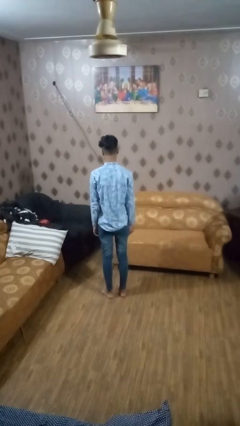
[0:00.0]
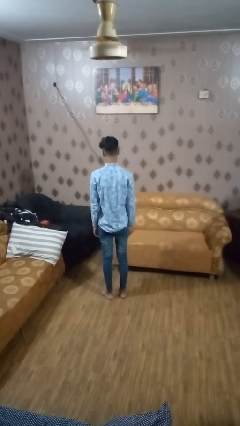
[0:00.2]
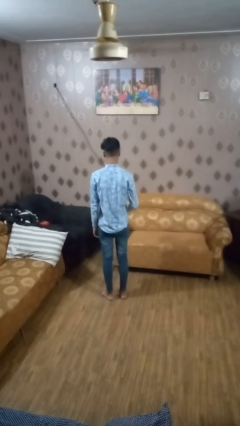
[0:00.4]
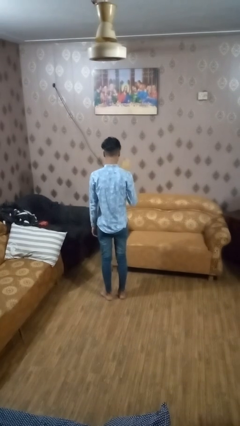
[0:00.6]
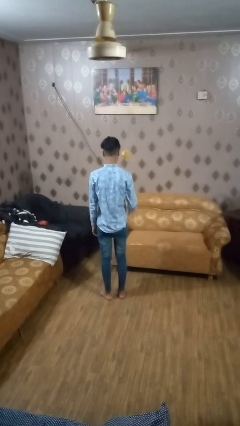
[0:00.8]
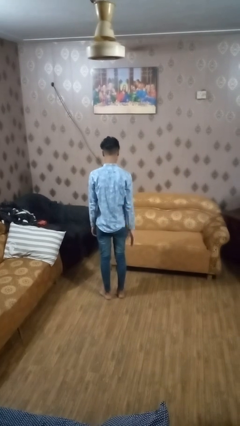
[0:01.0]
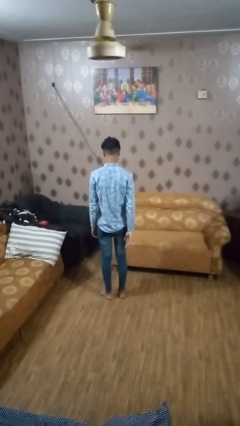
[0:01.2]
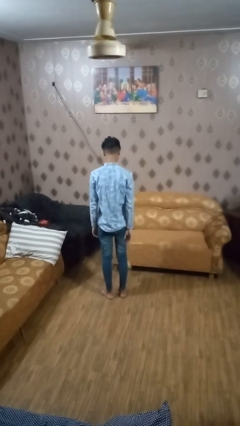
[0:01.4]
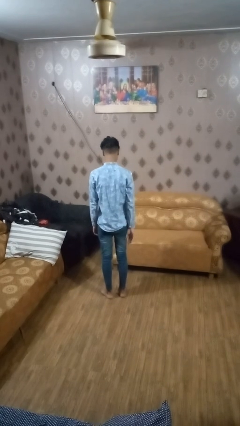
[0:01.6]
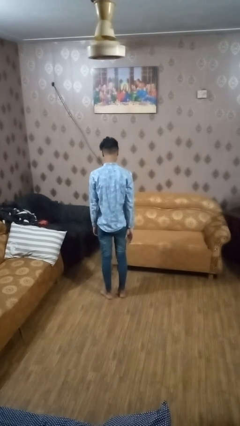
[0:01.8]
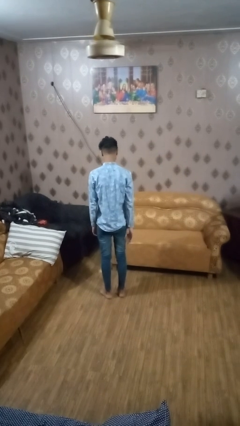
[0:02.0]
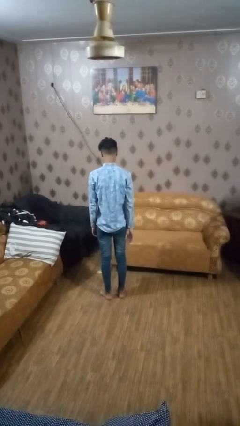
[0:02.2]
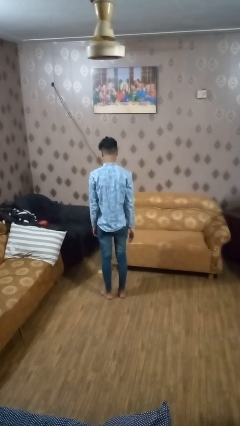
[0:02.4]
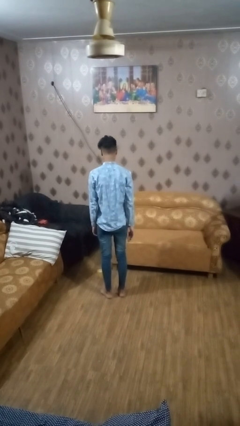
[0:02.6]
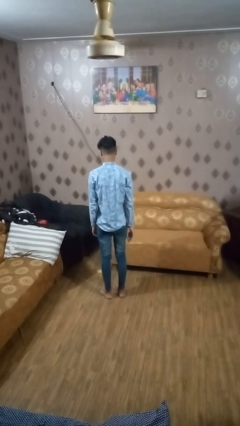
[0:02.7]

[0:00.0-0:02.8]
person throws object into air

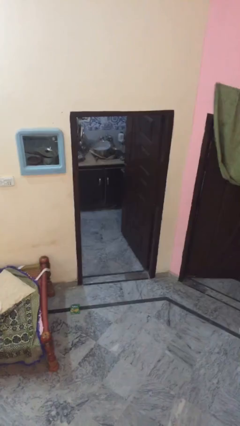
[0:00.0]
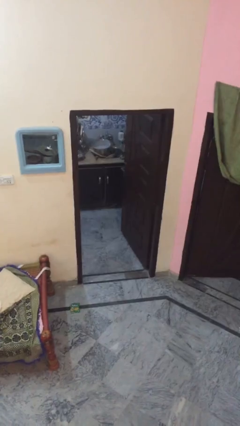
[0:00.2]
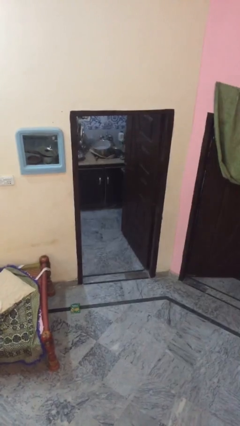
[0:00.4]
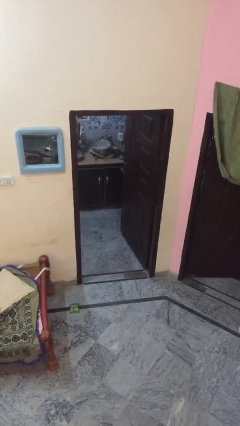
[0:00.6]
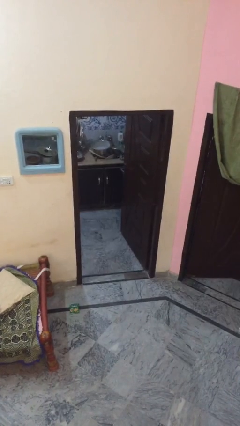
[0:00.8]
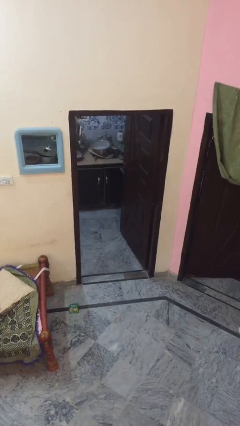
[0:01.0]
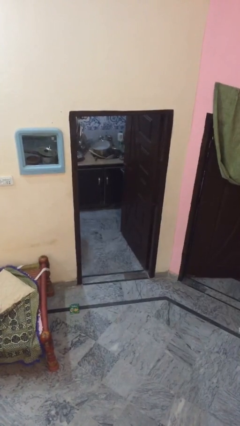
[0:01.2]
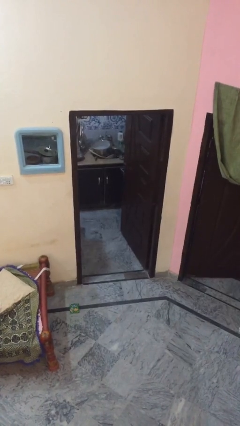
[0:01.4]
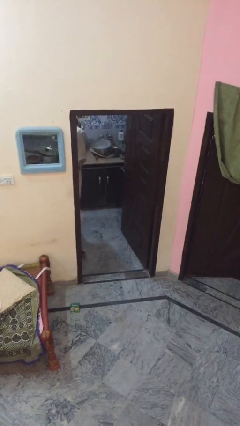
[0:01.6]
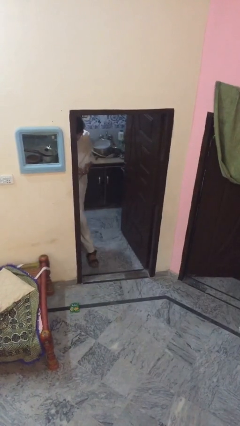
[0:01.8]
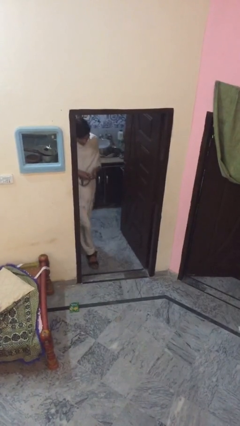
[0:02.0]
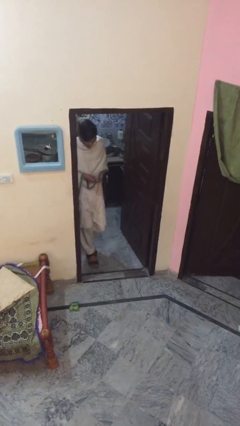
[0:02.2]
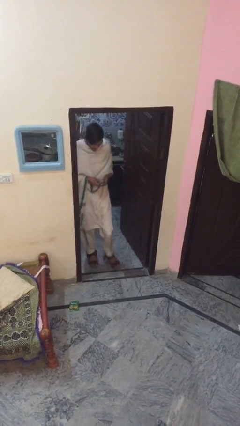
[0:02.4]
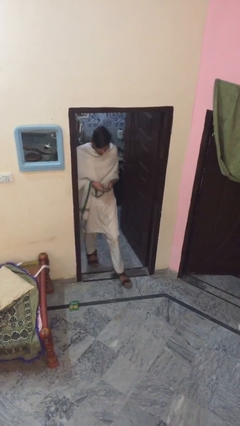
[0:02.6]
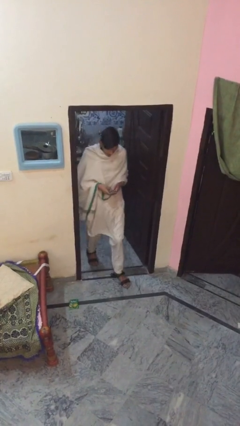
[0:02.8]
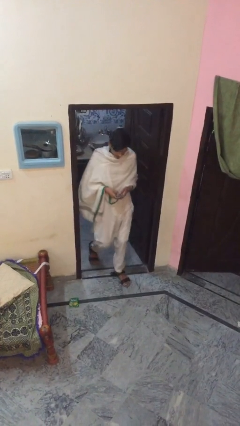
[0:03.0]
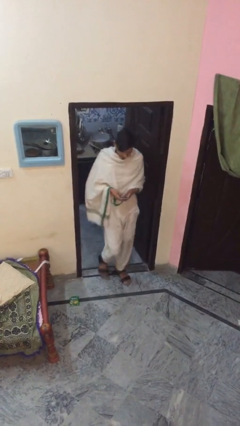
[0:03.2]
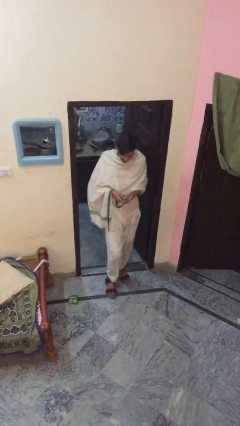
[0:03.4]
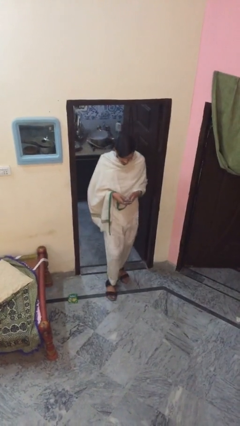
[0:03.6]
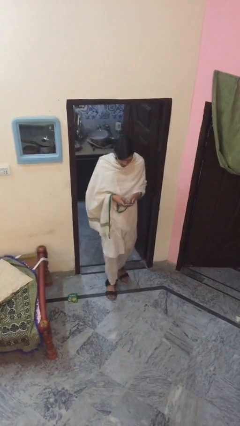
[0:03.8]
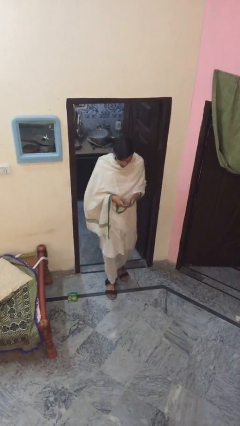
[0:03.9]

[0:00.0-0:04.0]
person enters scene through structure

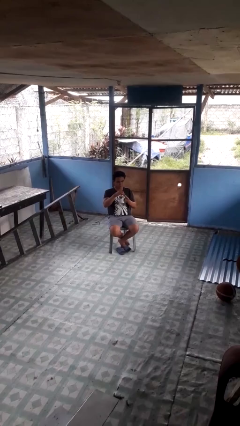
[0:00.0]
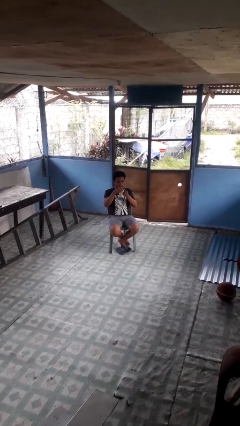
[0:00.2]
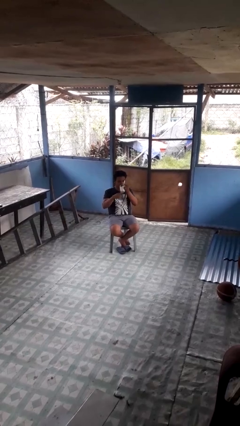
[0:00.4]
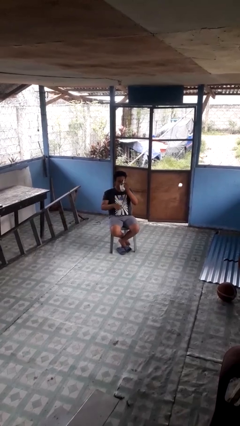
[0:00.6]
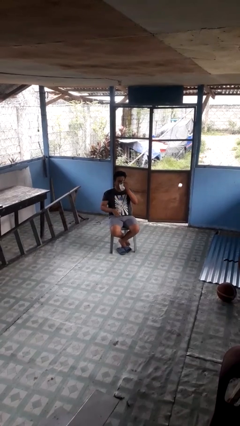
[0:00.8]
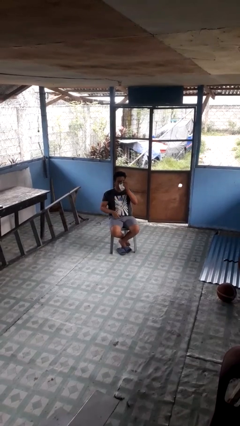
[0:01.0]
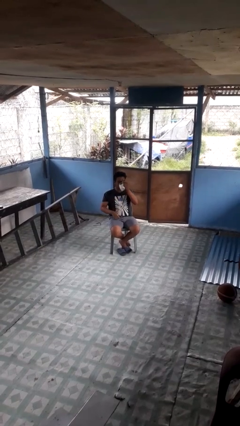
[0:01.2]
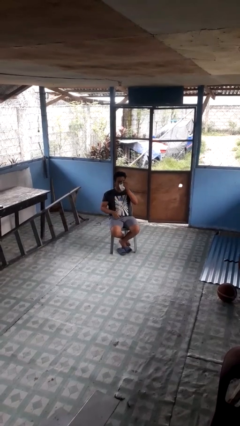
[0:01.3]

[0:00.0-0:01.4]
person drinks from mug

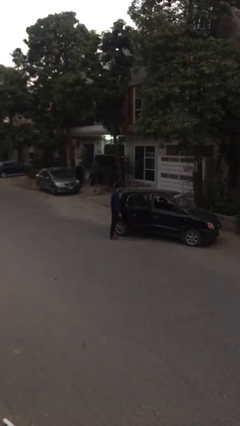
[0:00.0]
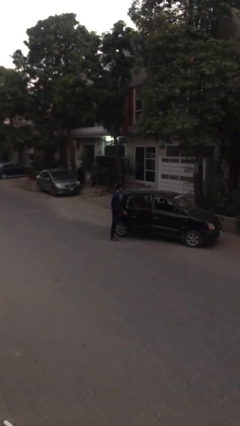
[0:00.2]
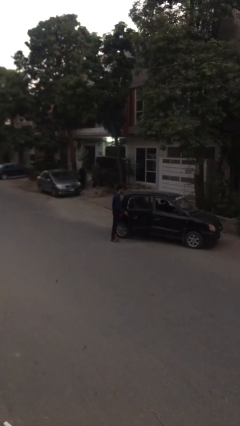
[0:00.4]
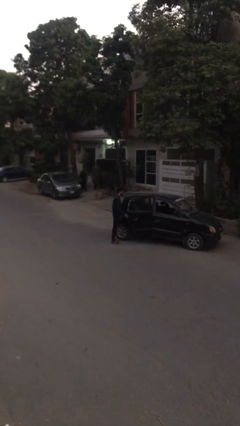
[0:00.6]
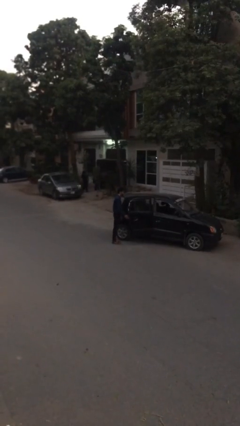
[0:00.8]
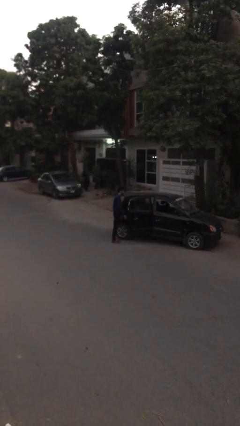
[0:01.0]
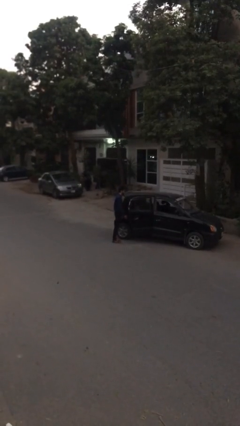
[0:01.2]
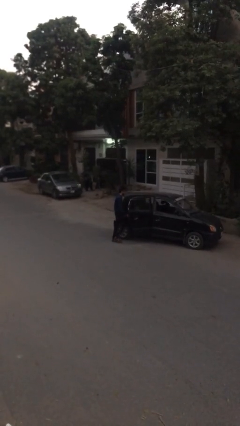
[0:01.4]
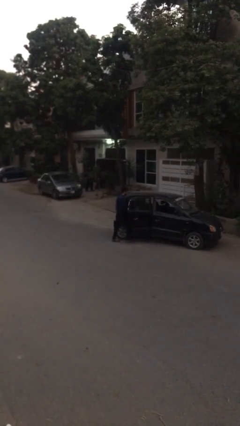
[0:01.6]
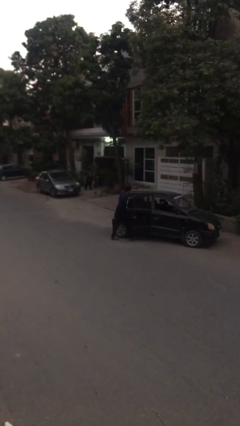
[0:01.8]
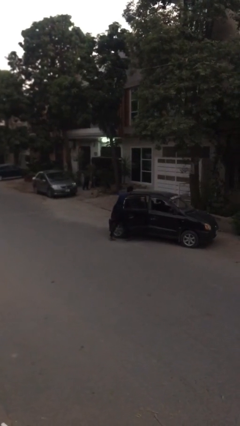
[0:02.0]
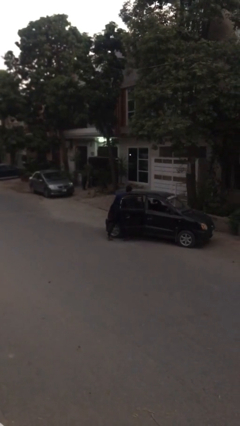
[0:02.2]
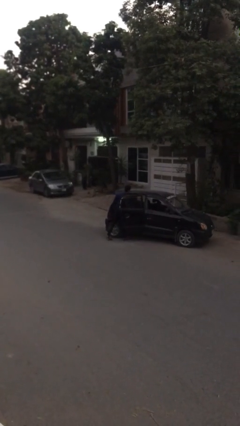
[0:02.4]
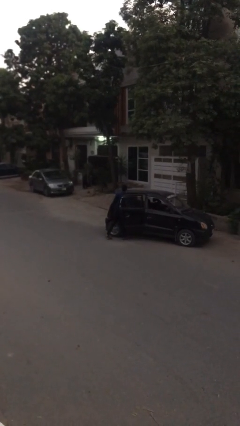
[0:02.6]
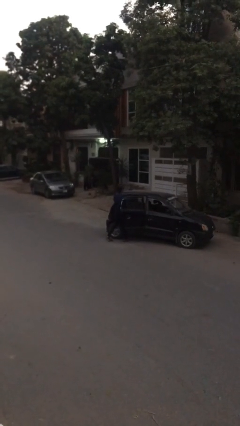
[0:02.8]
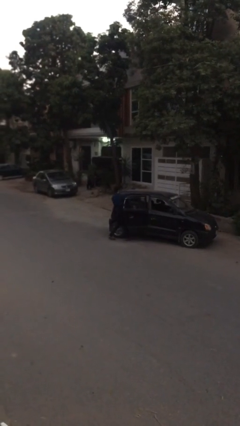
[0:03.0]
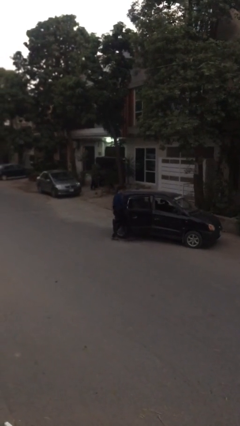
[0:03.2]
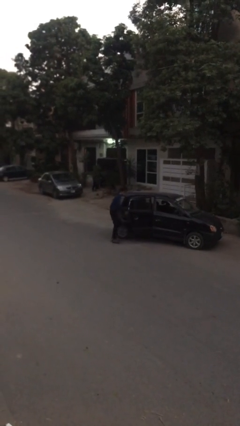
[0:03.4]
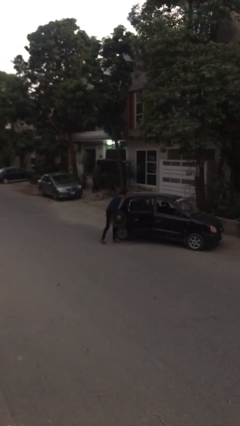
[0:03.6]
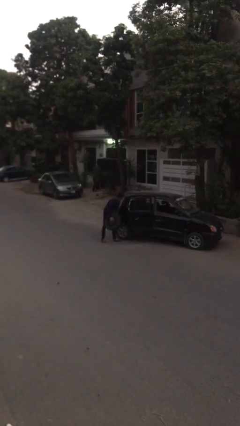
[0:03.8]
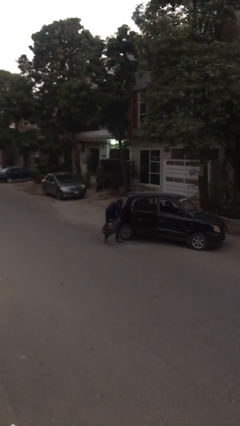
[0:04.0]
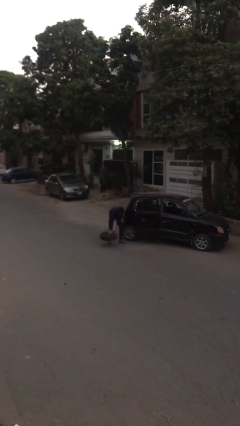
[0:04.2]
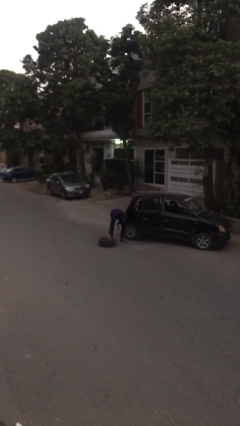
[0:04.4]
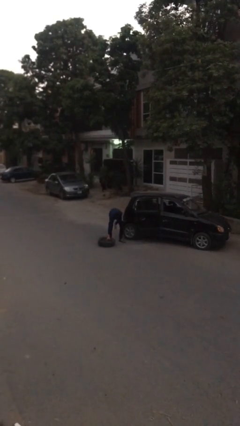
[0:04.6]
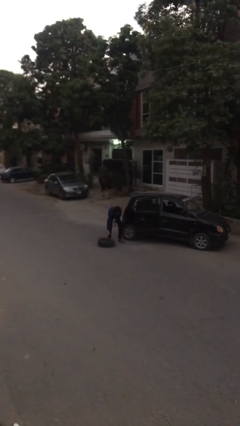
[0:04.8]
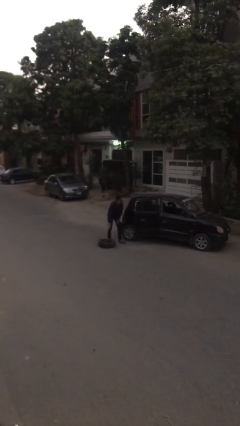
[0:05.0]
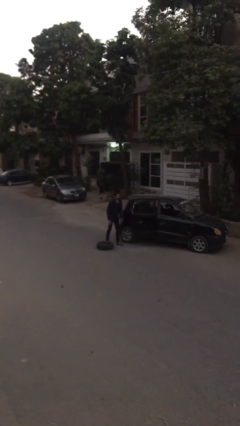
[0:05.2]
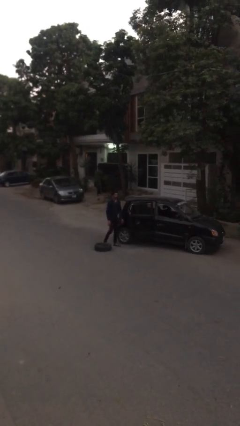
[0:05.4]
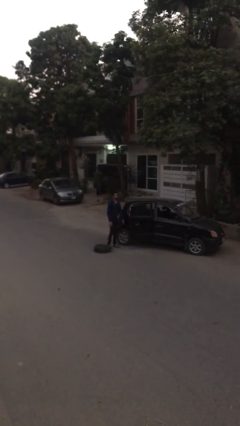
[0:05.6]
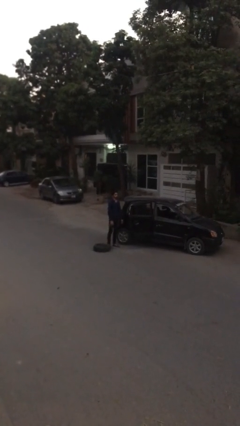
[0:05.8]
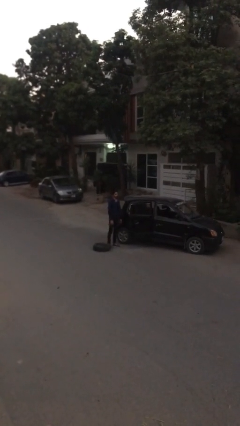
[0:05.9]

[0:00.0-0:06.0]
person unloads car

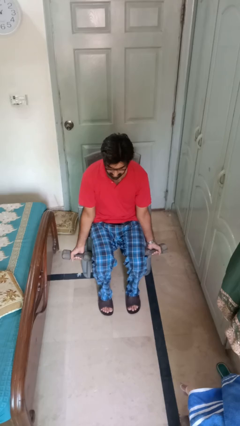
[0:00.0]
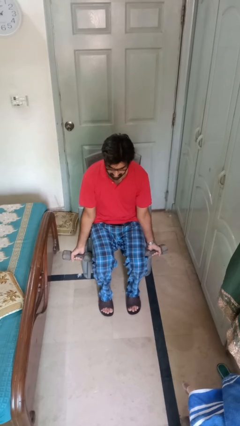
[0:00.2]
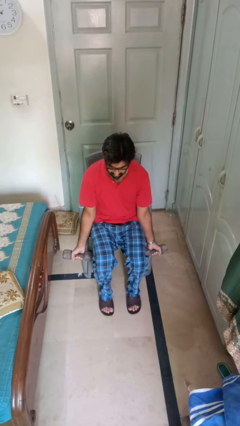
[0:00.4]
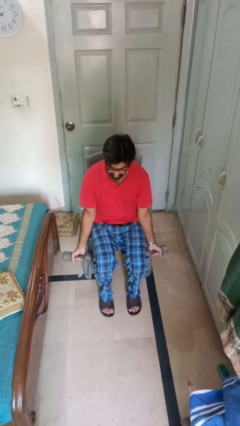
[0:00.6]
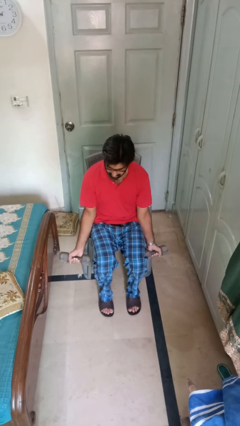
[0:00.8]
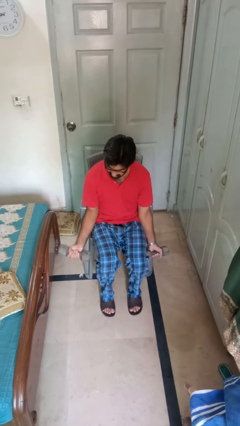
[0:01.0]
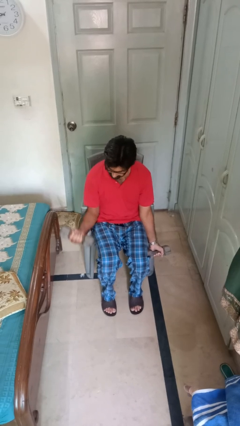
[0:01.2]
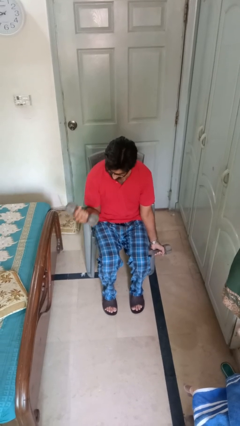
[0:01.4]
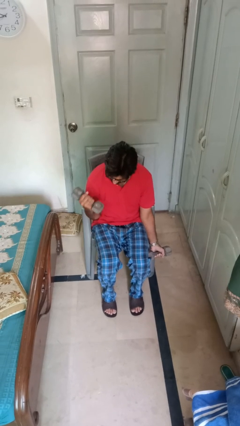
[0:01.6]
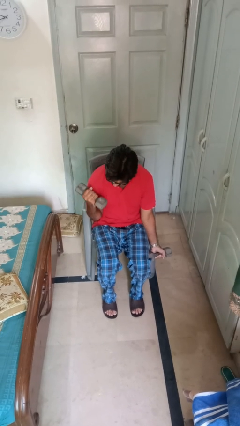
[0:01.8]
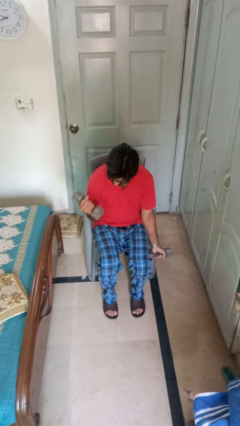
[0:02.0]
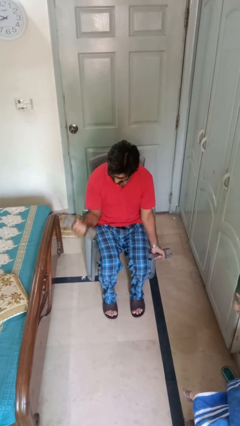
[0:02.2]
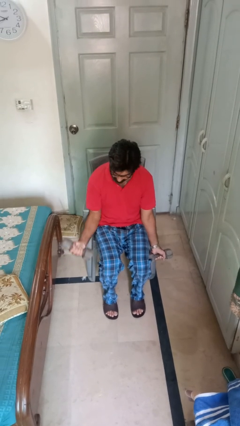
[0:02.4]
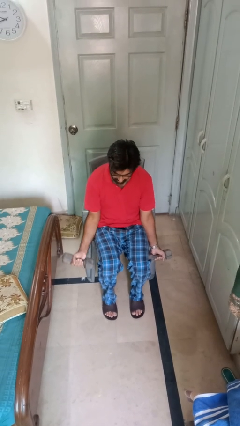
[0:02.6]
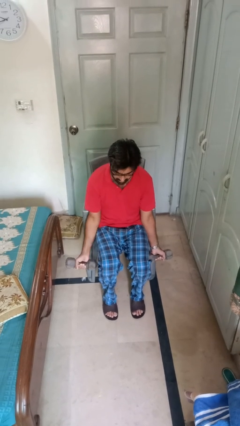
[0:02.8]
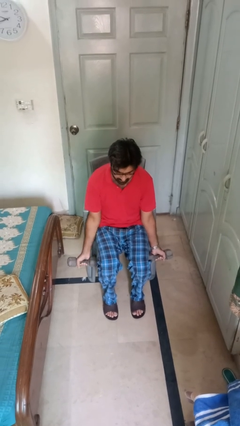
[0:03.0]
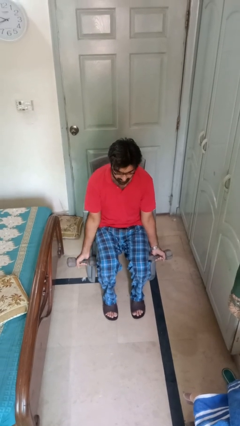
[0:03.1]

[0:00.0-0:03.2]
person lifts dumbbells
